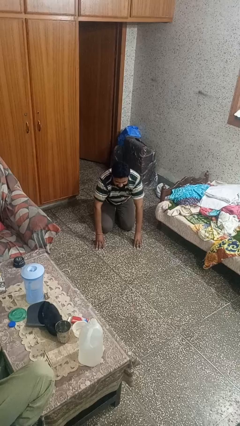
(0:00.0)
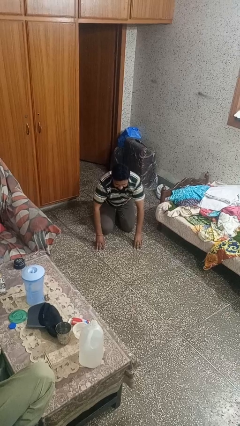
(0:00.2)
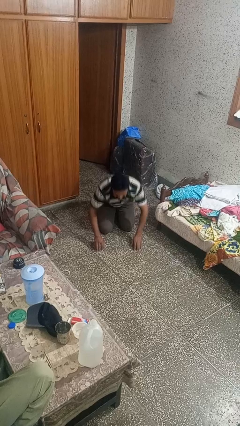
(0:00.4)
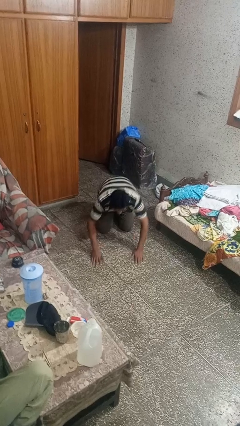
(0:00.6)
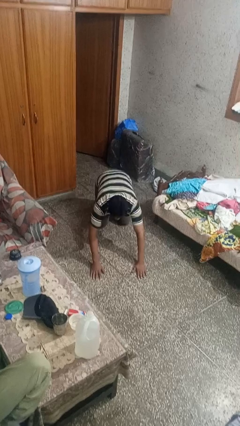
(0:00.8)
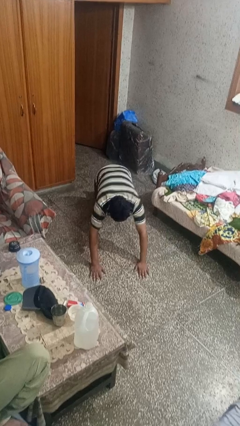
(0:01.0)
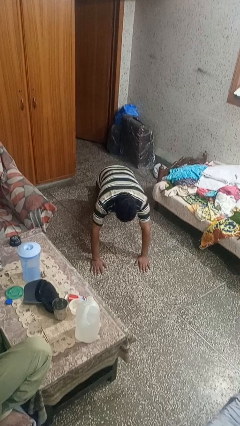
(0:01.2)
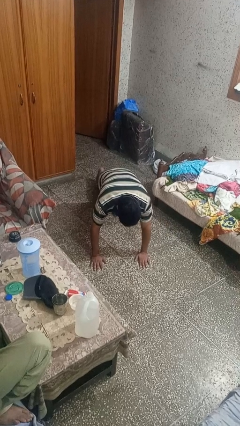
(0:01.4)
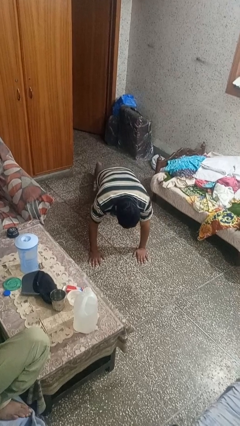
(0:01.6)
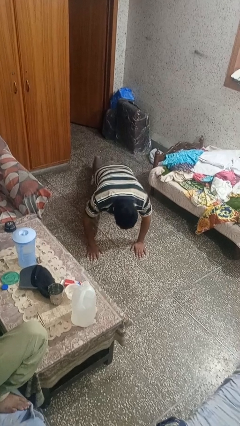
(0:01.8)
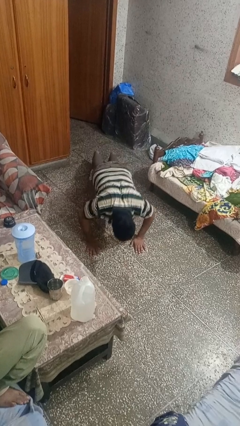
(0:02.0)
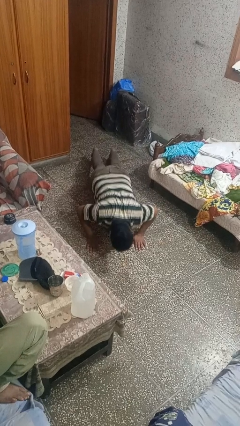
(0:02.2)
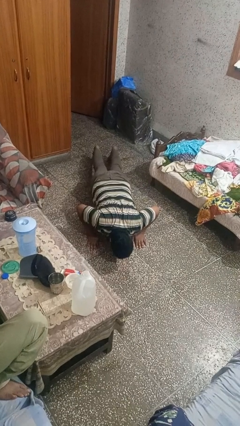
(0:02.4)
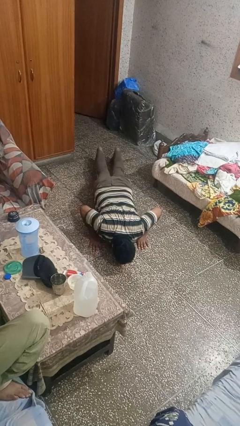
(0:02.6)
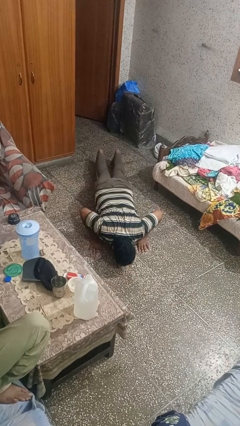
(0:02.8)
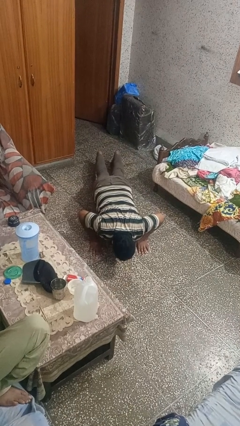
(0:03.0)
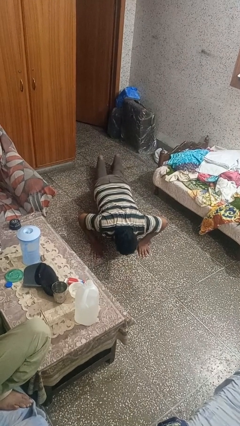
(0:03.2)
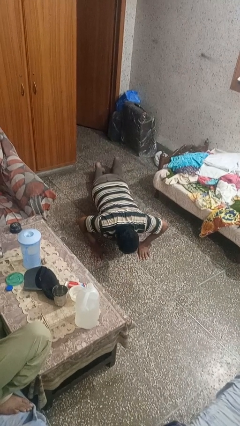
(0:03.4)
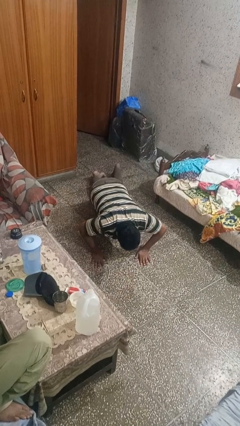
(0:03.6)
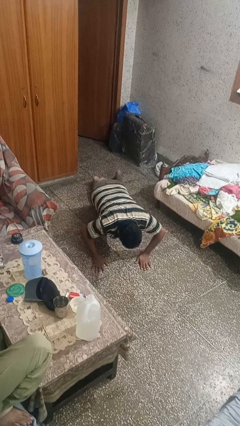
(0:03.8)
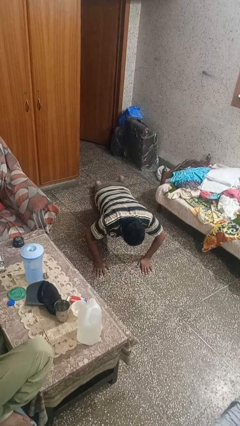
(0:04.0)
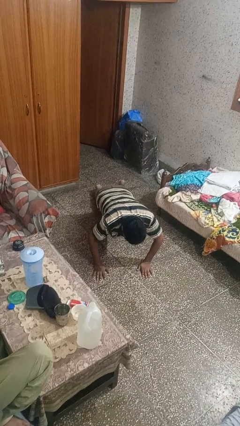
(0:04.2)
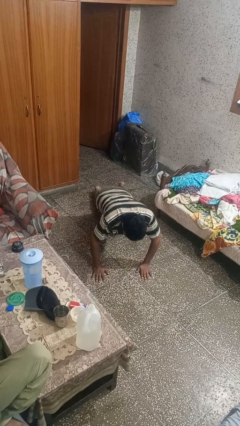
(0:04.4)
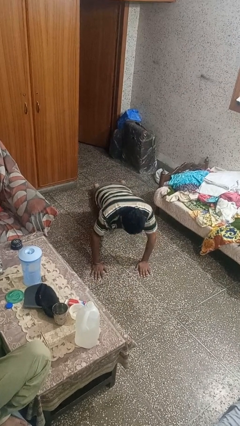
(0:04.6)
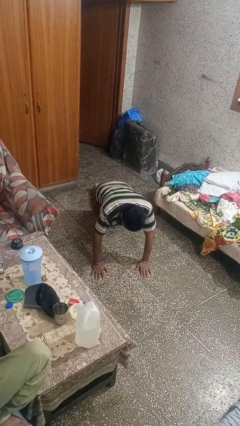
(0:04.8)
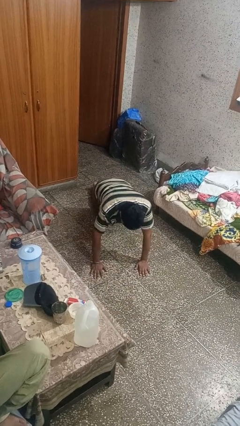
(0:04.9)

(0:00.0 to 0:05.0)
person exercises with pushup

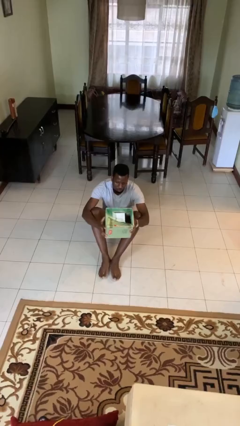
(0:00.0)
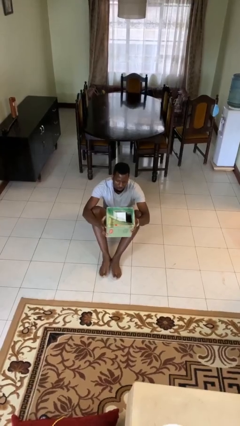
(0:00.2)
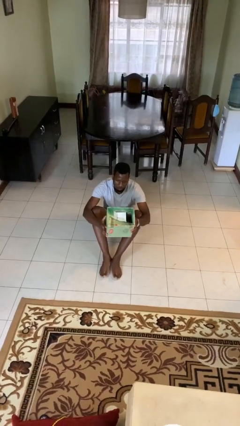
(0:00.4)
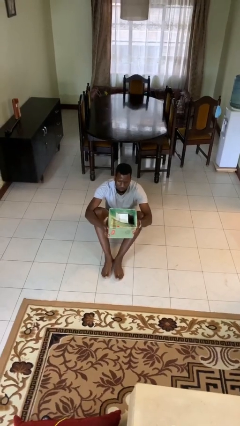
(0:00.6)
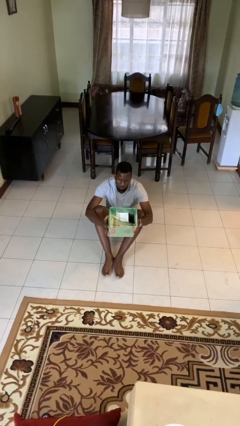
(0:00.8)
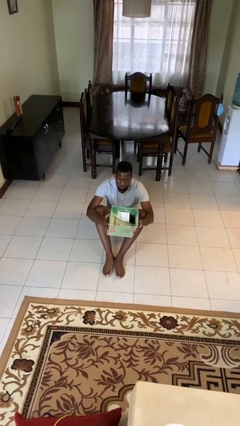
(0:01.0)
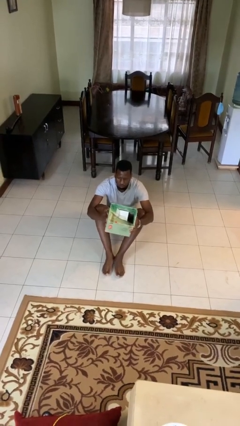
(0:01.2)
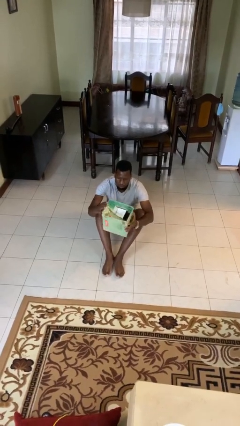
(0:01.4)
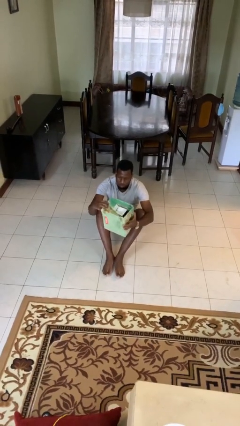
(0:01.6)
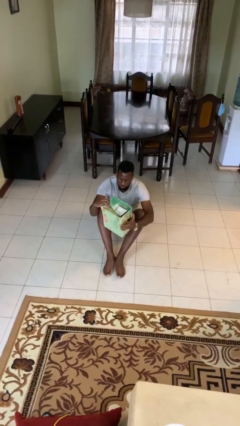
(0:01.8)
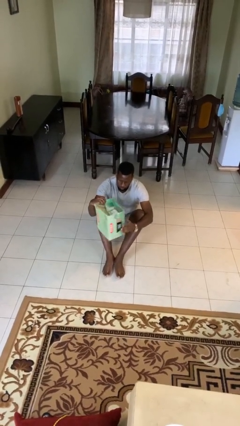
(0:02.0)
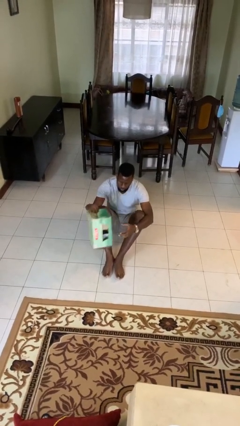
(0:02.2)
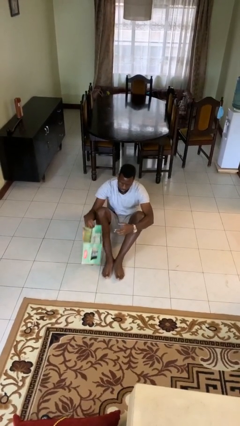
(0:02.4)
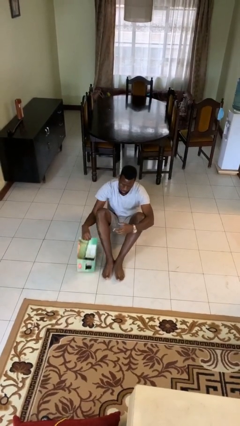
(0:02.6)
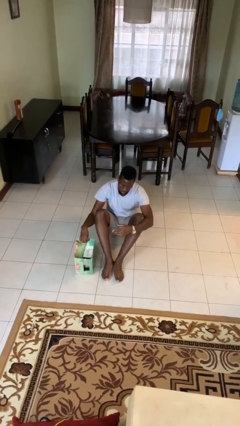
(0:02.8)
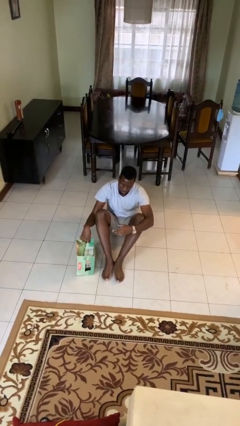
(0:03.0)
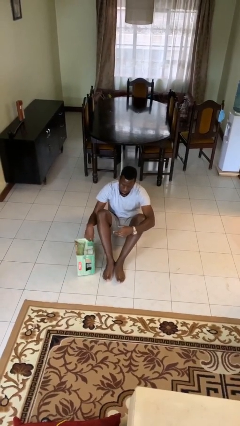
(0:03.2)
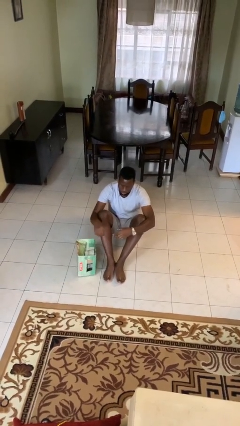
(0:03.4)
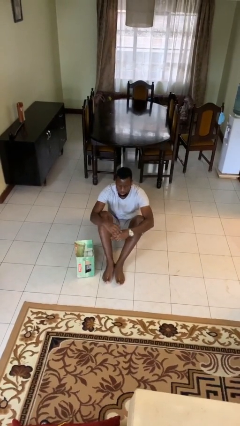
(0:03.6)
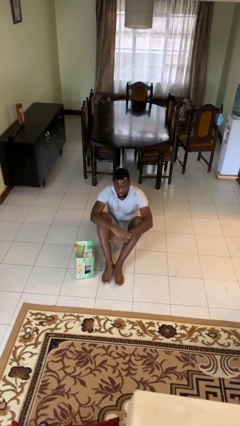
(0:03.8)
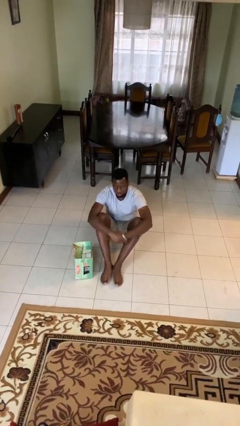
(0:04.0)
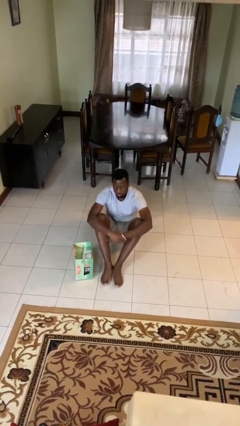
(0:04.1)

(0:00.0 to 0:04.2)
person puts down object on floor

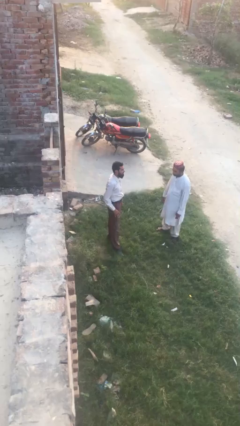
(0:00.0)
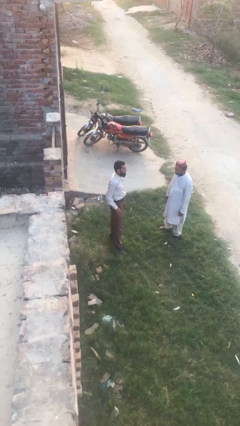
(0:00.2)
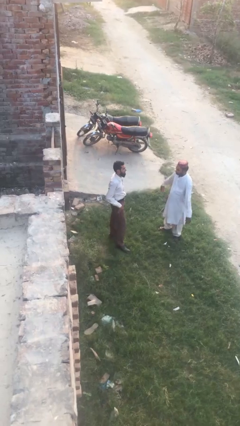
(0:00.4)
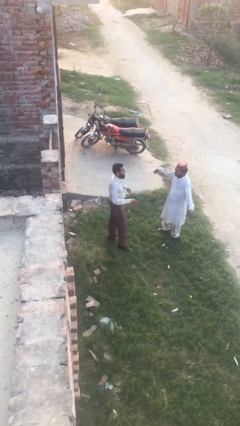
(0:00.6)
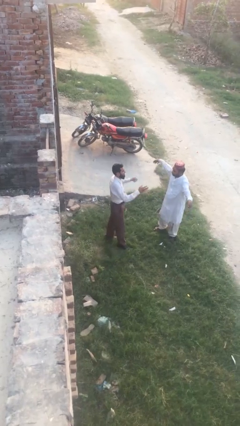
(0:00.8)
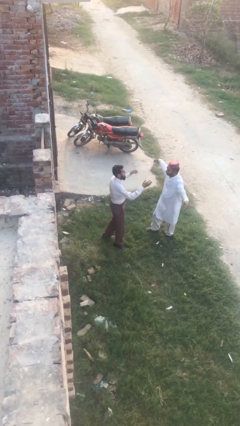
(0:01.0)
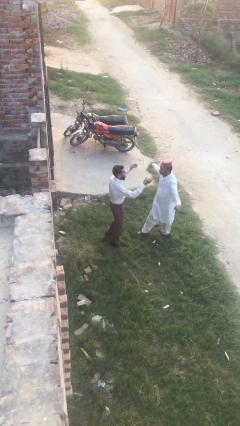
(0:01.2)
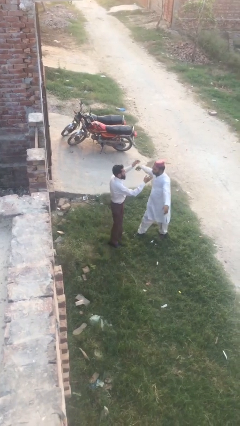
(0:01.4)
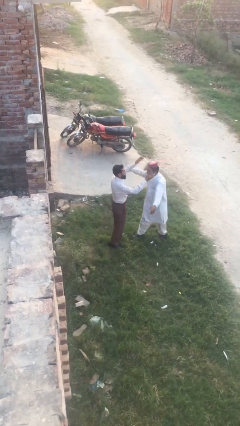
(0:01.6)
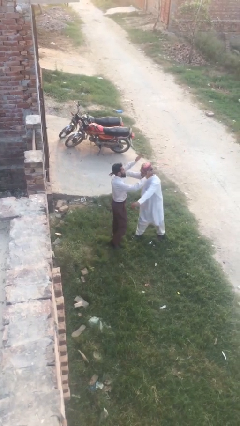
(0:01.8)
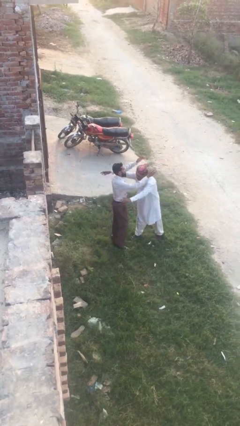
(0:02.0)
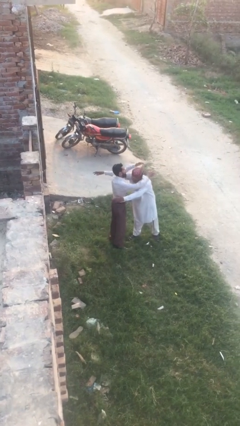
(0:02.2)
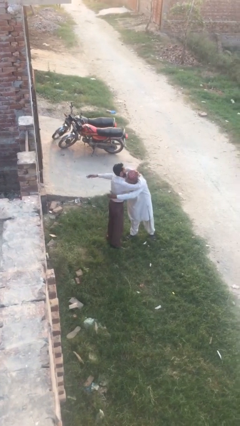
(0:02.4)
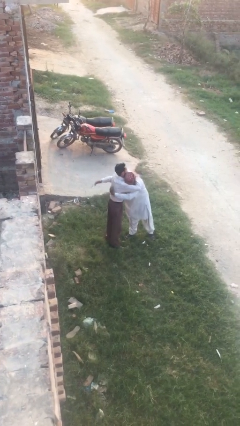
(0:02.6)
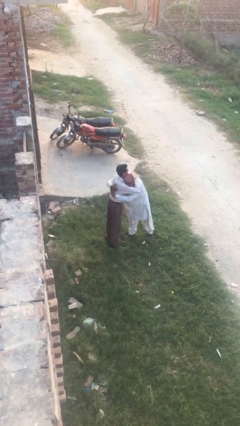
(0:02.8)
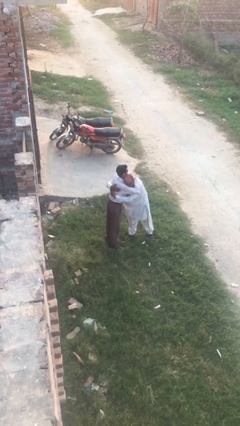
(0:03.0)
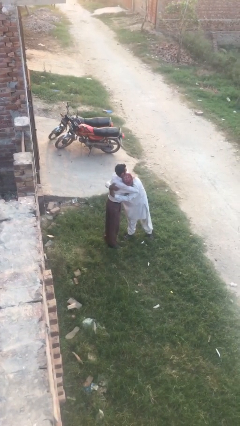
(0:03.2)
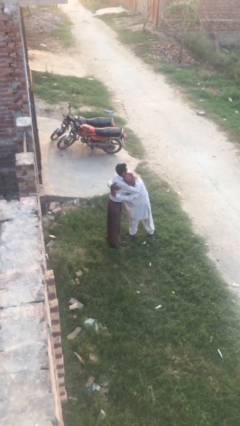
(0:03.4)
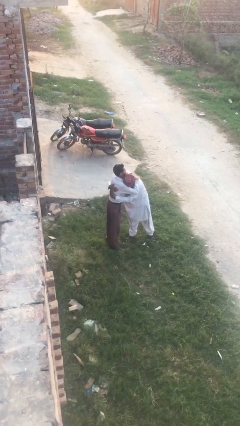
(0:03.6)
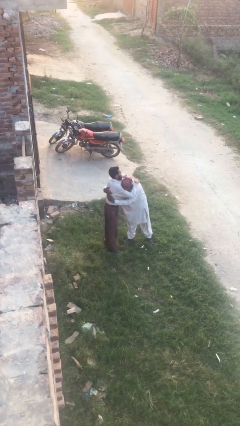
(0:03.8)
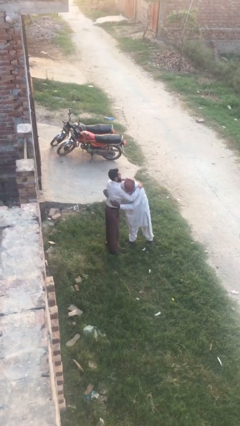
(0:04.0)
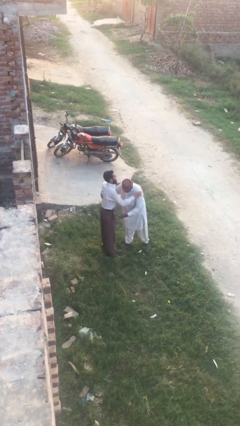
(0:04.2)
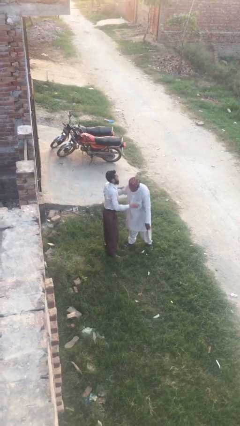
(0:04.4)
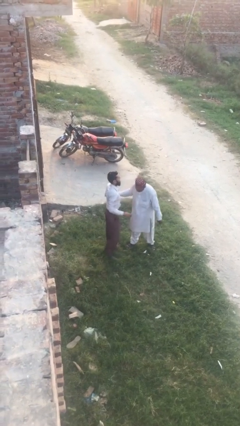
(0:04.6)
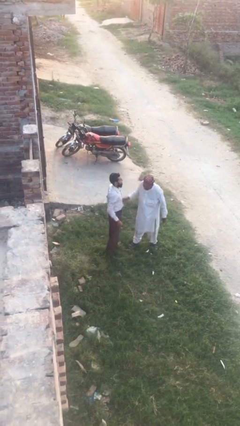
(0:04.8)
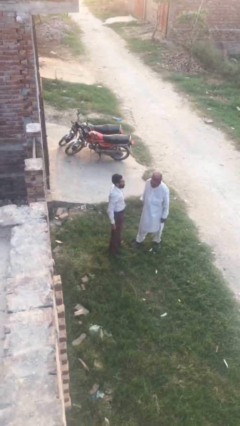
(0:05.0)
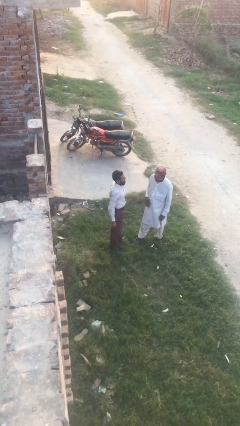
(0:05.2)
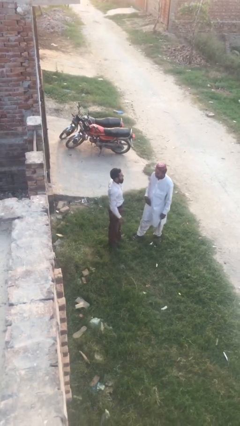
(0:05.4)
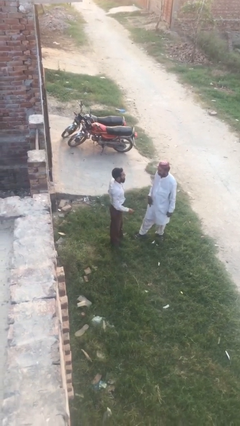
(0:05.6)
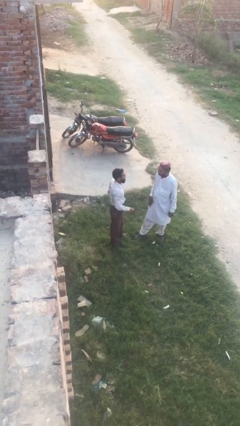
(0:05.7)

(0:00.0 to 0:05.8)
person embraces person

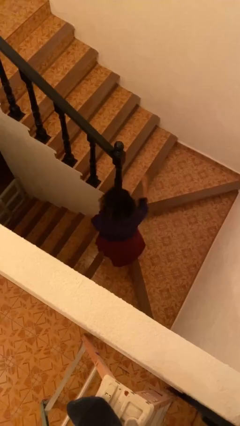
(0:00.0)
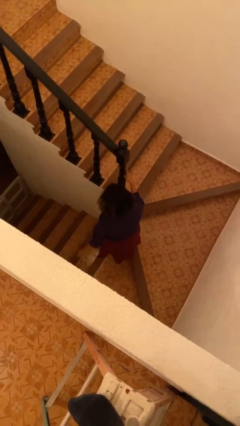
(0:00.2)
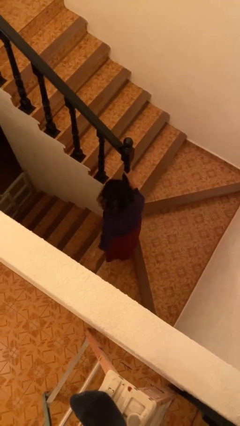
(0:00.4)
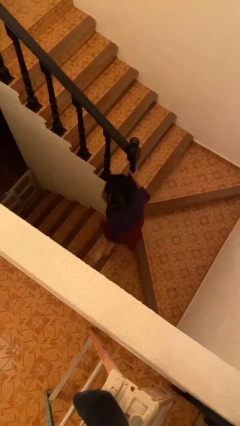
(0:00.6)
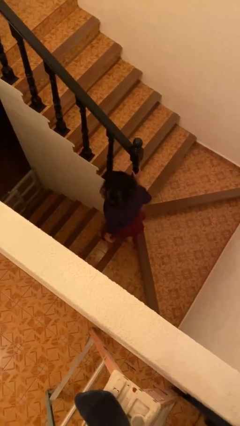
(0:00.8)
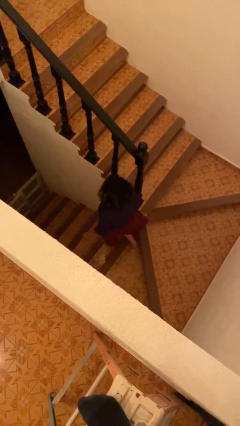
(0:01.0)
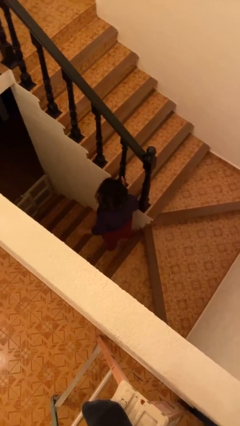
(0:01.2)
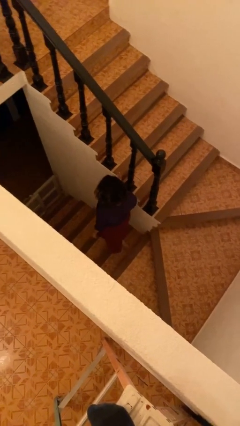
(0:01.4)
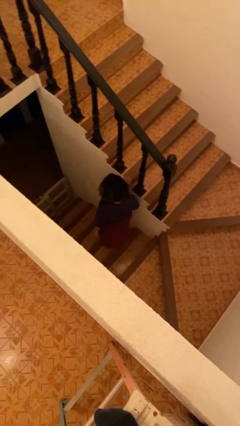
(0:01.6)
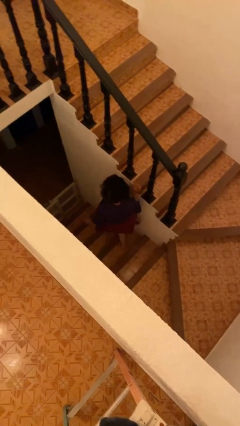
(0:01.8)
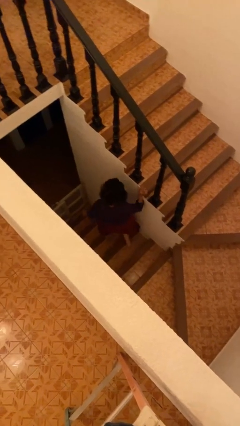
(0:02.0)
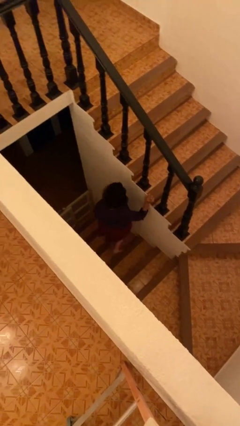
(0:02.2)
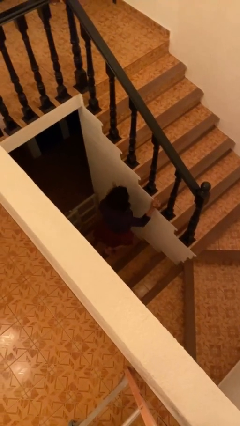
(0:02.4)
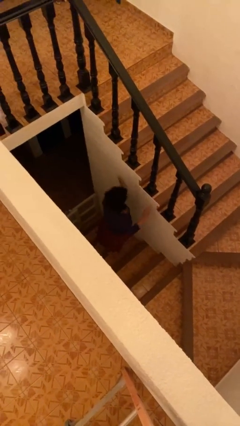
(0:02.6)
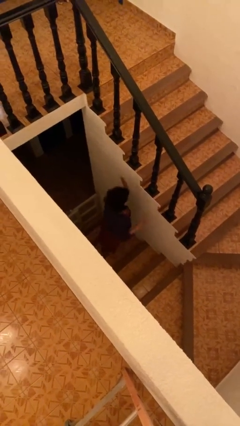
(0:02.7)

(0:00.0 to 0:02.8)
person climbs down stairs

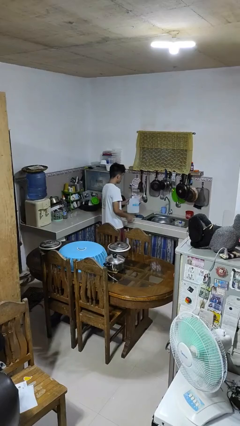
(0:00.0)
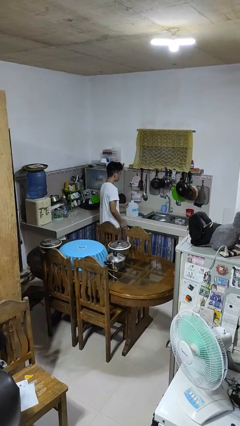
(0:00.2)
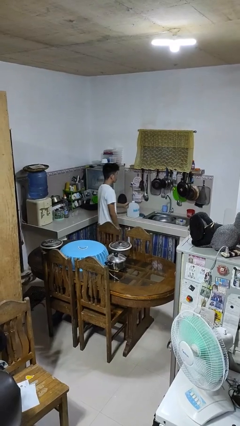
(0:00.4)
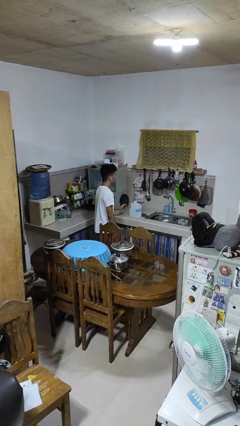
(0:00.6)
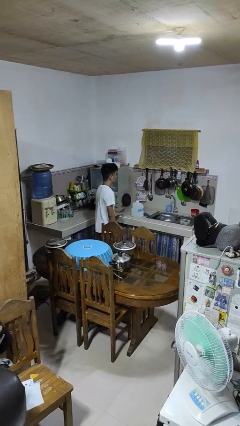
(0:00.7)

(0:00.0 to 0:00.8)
person puts down object on countertop
